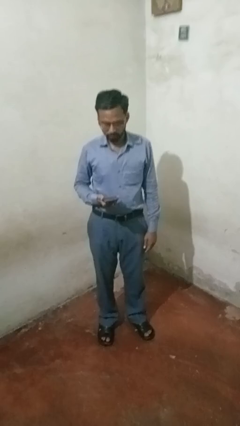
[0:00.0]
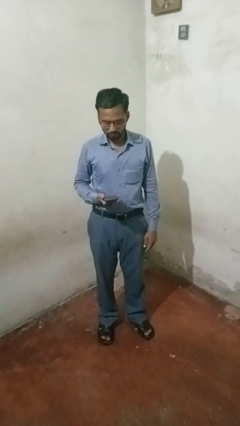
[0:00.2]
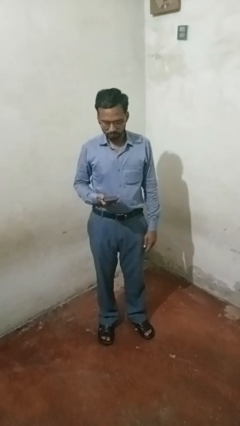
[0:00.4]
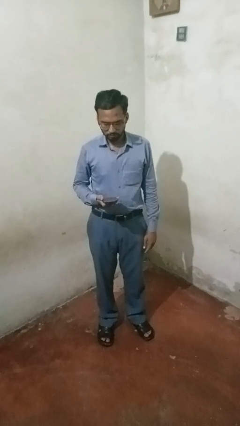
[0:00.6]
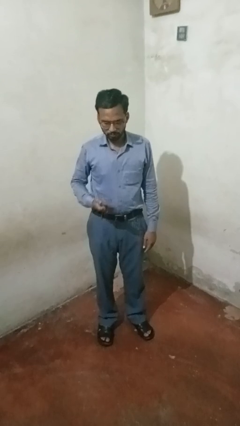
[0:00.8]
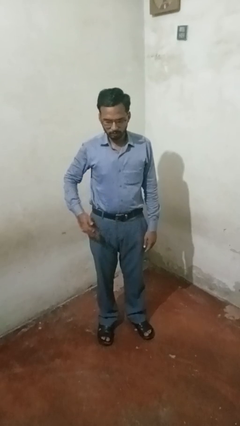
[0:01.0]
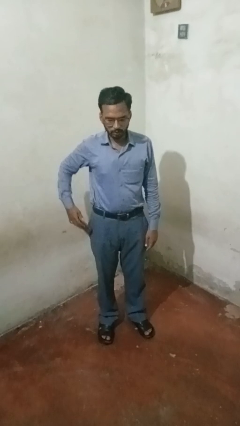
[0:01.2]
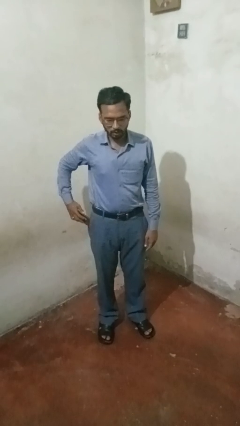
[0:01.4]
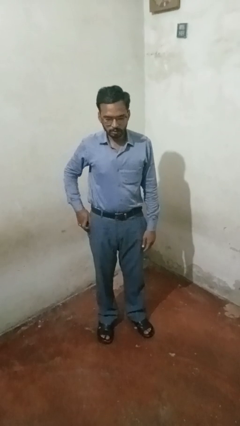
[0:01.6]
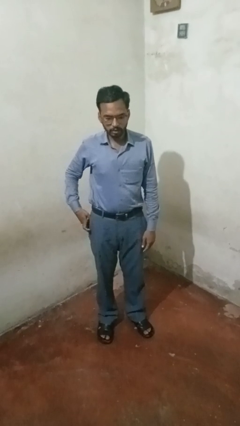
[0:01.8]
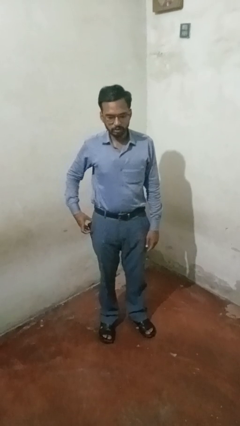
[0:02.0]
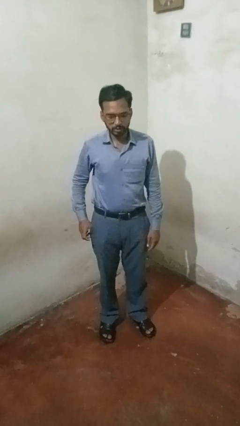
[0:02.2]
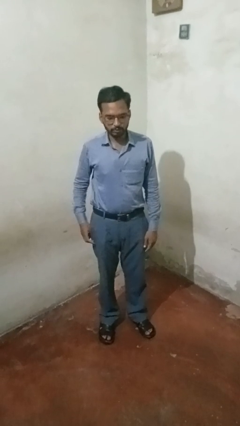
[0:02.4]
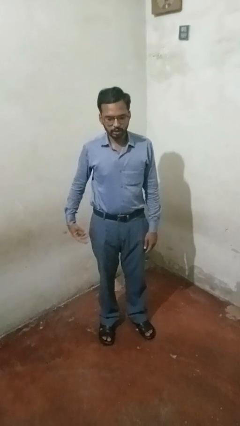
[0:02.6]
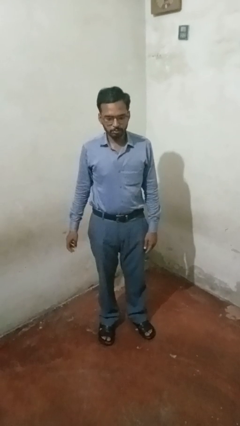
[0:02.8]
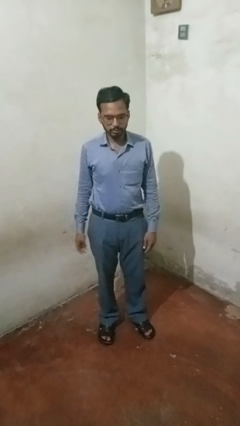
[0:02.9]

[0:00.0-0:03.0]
person puts phone into pocket

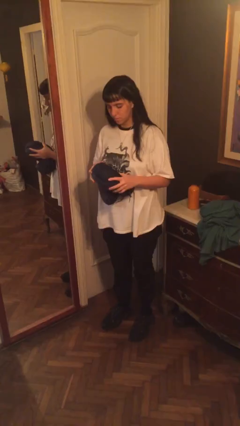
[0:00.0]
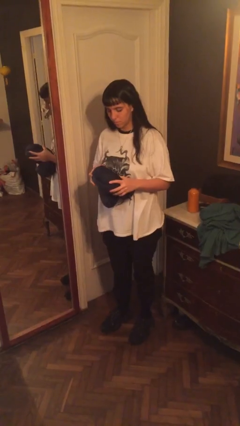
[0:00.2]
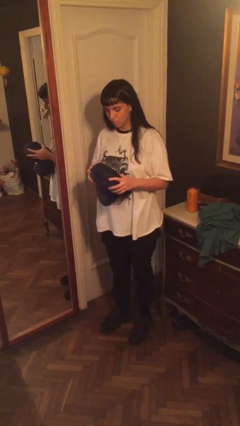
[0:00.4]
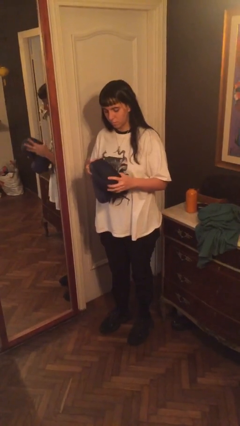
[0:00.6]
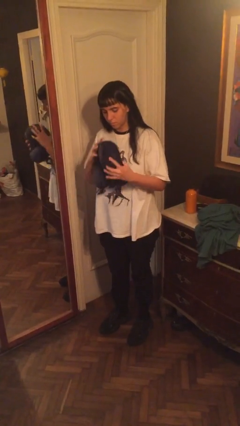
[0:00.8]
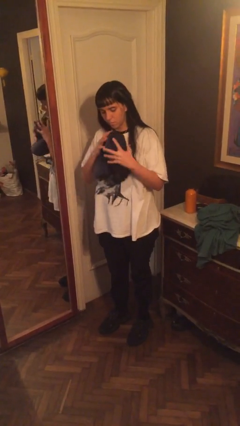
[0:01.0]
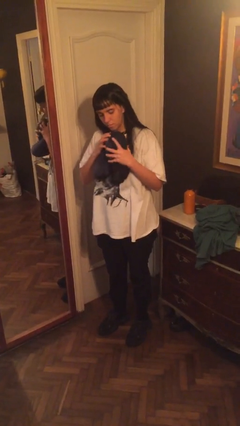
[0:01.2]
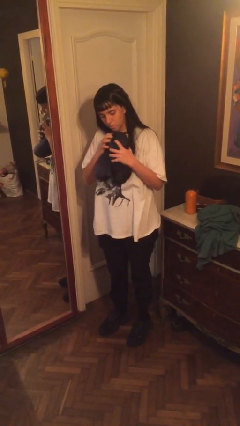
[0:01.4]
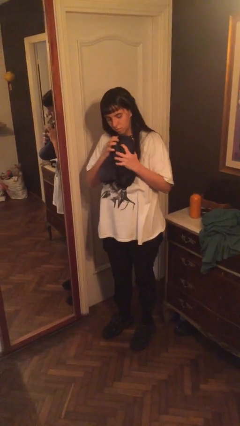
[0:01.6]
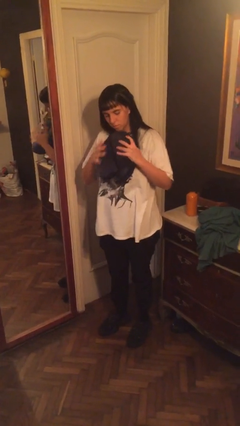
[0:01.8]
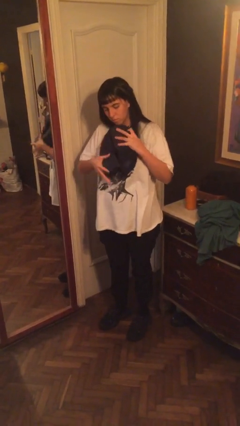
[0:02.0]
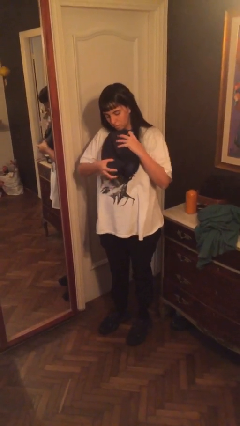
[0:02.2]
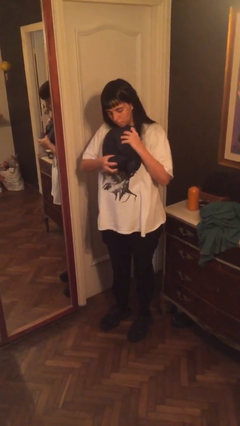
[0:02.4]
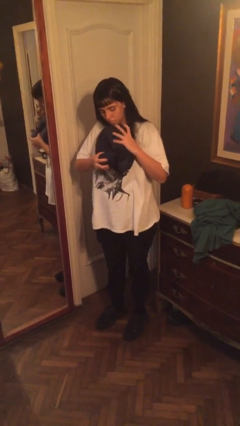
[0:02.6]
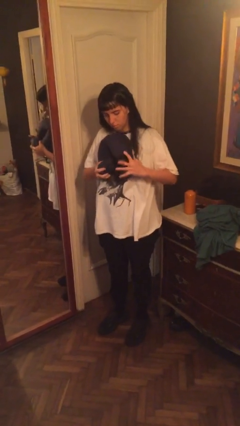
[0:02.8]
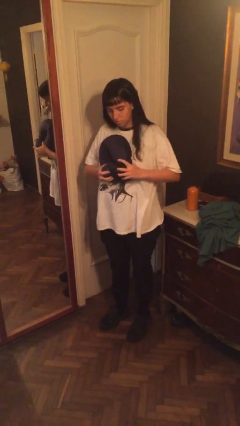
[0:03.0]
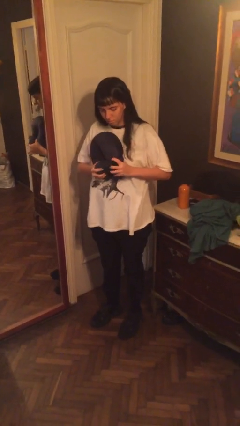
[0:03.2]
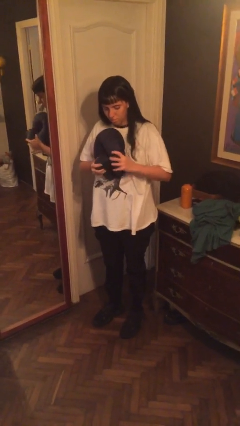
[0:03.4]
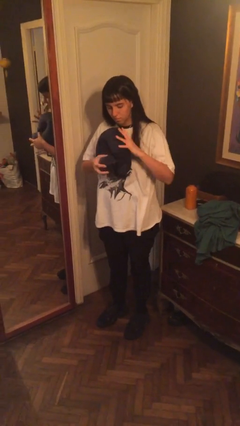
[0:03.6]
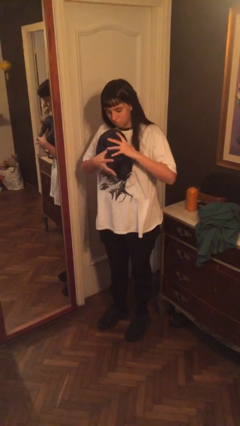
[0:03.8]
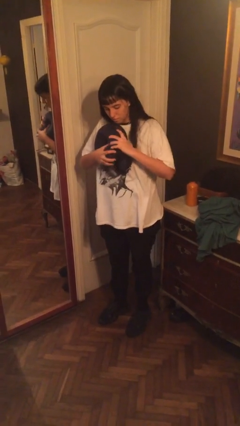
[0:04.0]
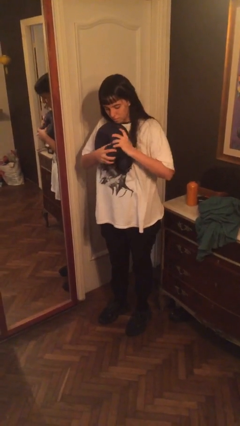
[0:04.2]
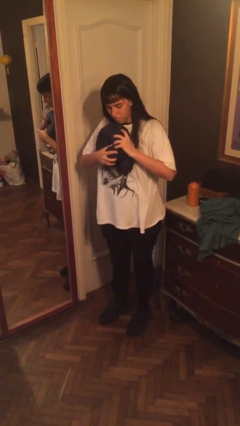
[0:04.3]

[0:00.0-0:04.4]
person squeezes object

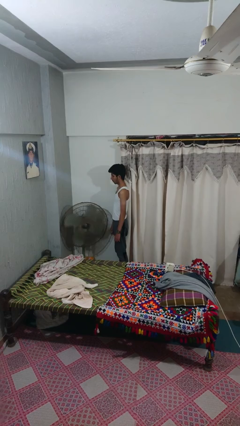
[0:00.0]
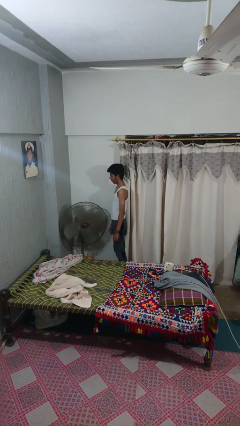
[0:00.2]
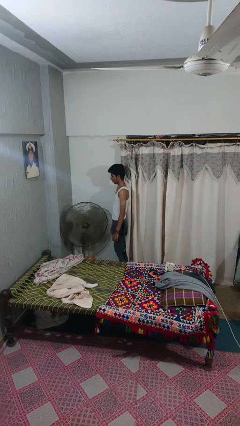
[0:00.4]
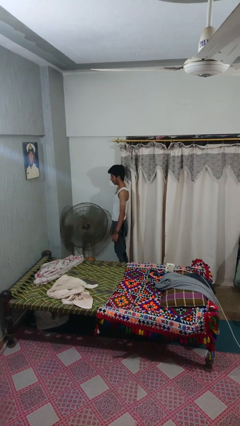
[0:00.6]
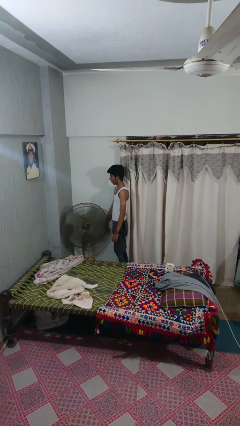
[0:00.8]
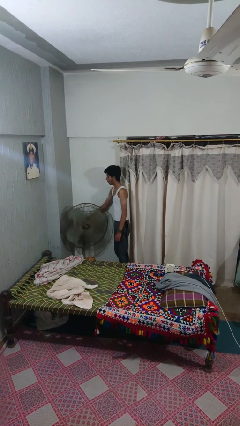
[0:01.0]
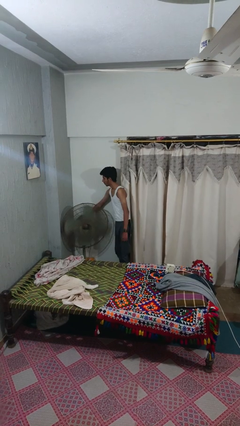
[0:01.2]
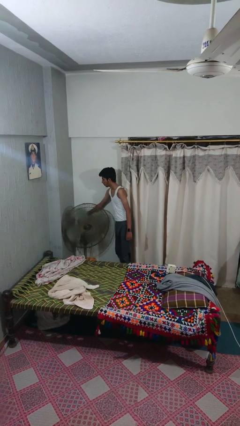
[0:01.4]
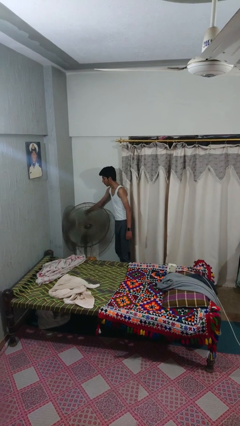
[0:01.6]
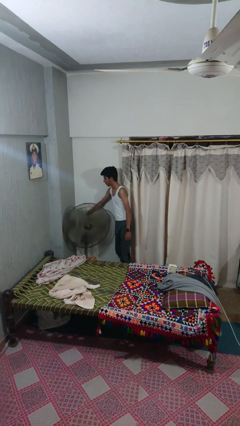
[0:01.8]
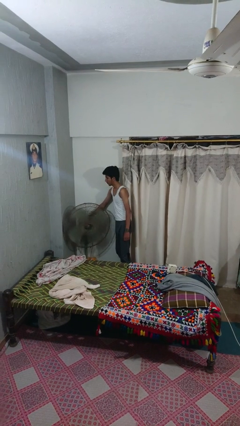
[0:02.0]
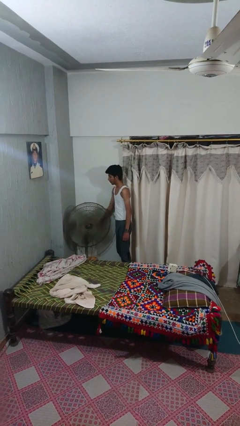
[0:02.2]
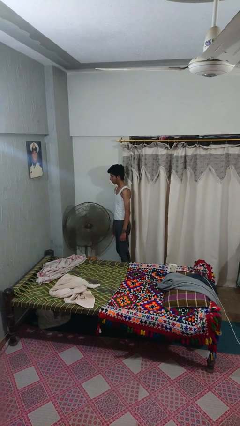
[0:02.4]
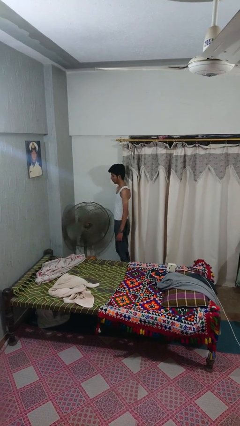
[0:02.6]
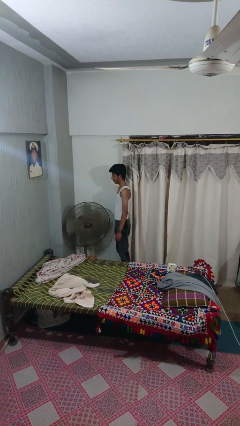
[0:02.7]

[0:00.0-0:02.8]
person turns off fan

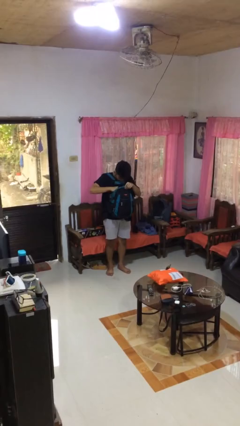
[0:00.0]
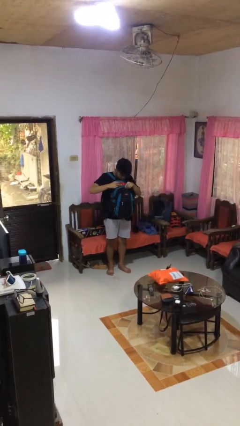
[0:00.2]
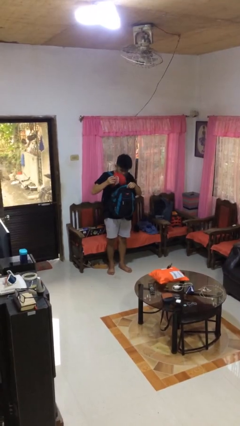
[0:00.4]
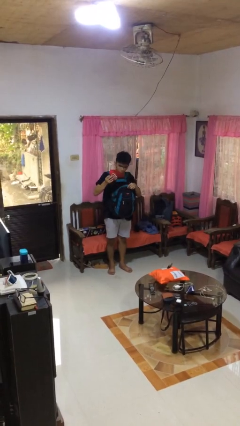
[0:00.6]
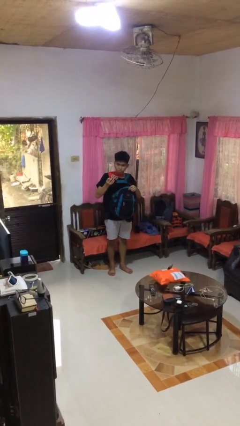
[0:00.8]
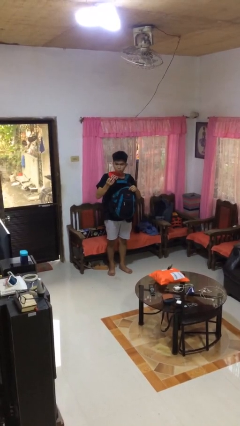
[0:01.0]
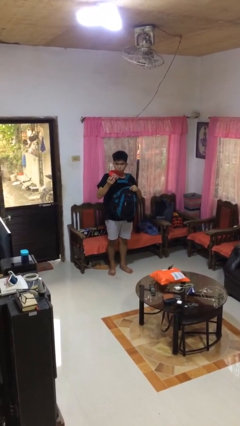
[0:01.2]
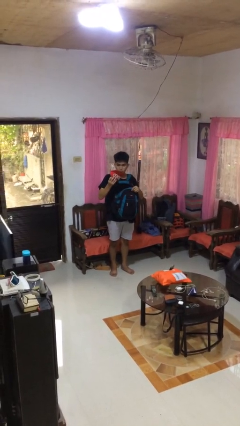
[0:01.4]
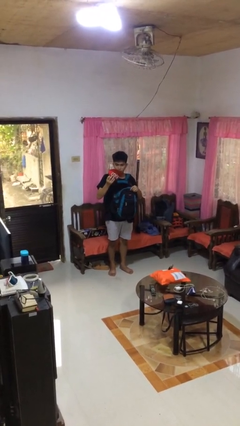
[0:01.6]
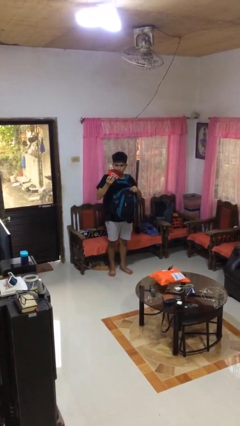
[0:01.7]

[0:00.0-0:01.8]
person takes object from backpack

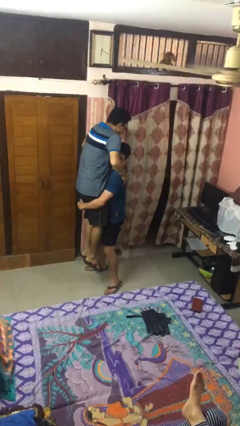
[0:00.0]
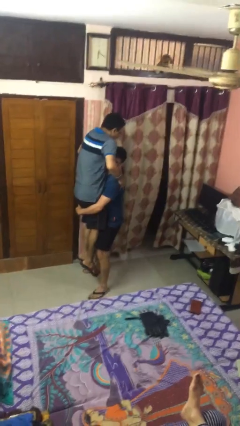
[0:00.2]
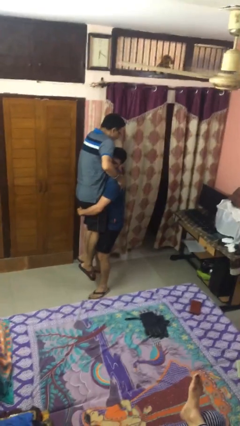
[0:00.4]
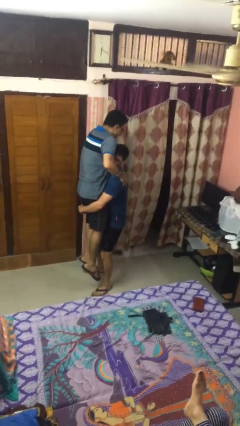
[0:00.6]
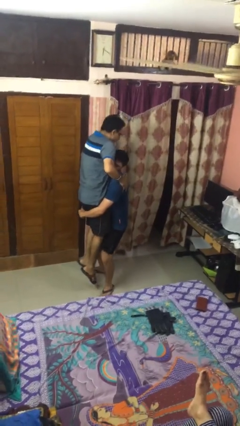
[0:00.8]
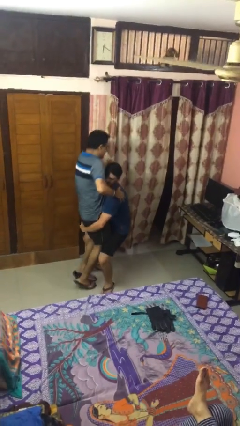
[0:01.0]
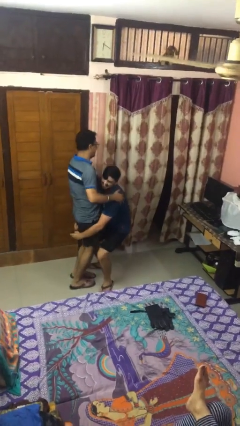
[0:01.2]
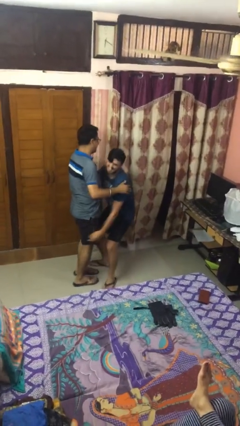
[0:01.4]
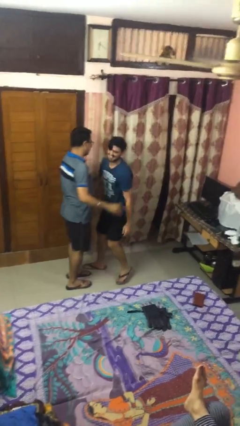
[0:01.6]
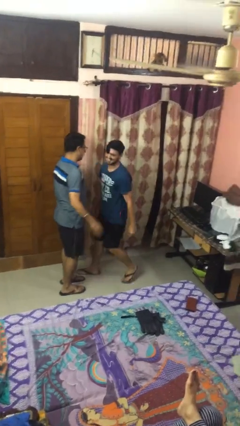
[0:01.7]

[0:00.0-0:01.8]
person puts down person

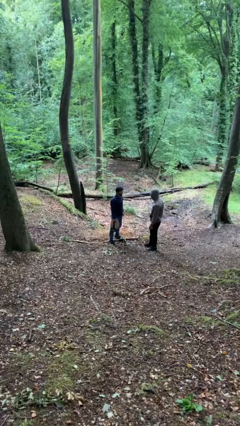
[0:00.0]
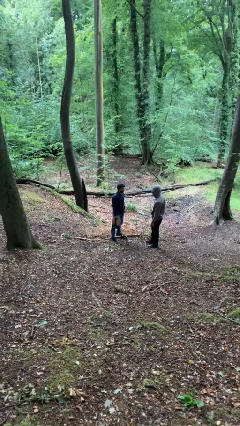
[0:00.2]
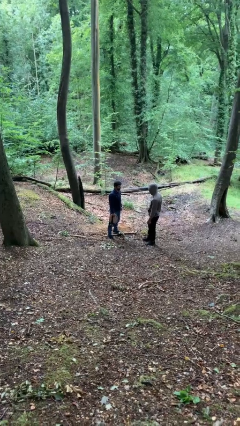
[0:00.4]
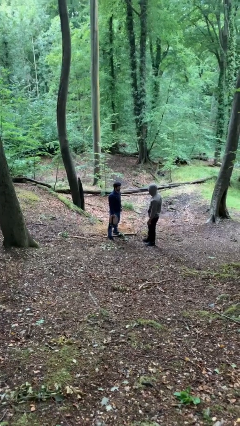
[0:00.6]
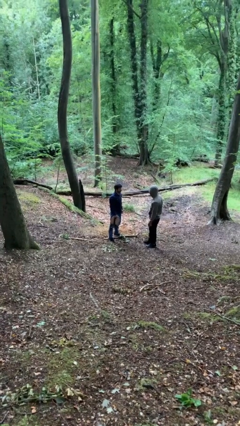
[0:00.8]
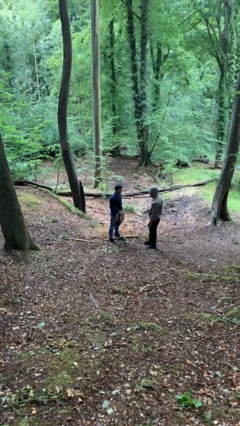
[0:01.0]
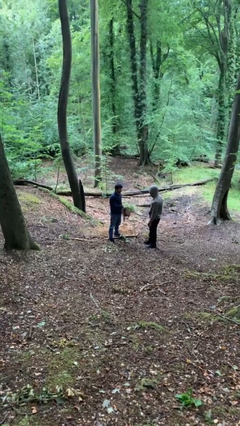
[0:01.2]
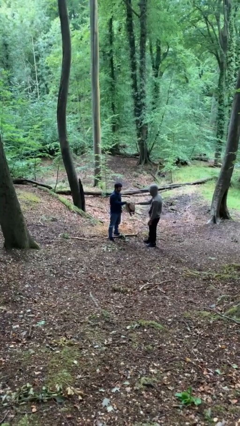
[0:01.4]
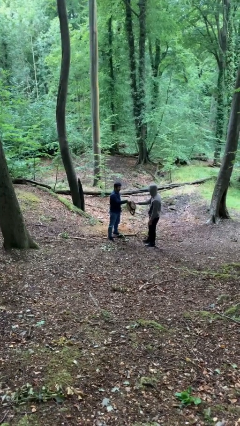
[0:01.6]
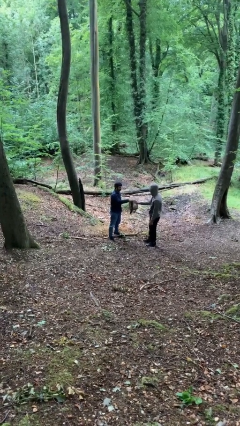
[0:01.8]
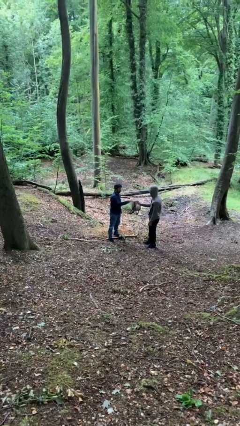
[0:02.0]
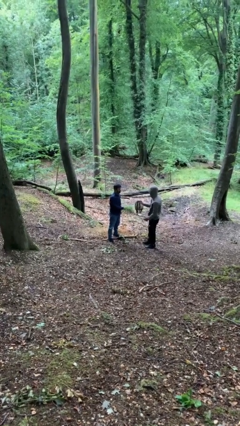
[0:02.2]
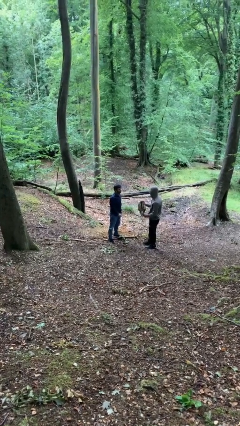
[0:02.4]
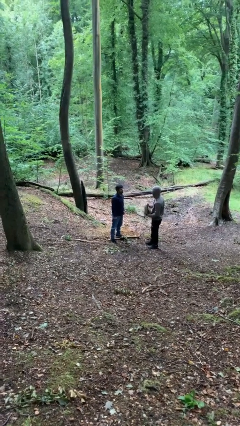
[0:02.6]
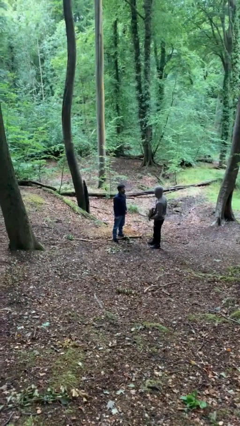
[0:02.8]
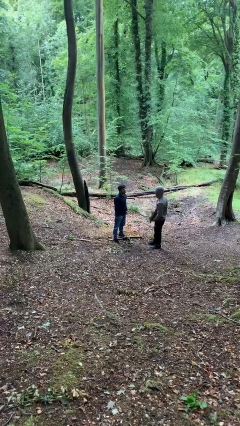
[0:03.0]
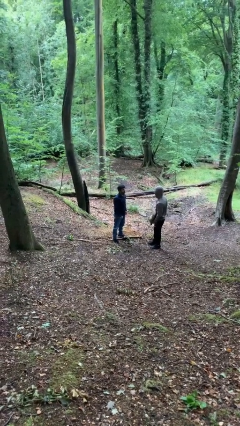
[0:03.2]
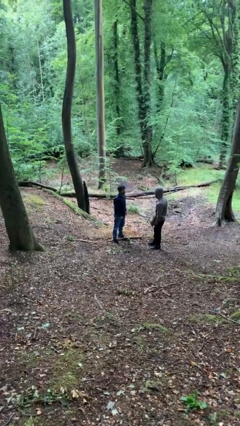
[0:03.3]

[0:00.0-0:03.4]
person transfers object to person

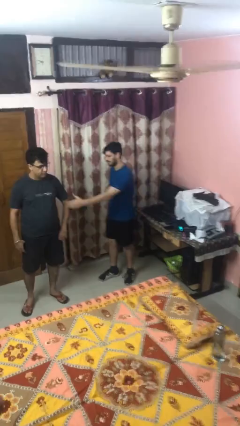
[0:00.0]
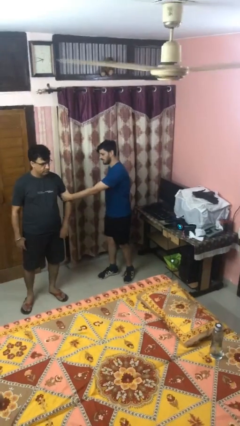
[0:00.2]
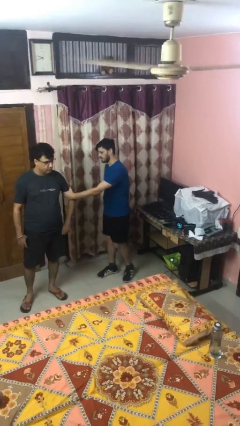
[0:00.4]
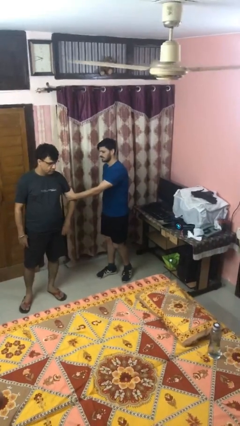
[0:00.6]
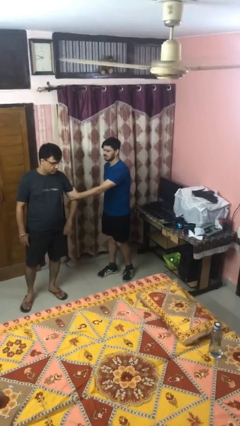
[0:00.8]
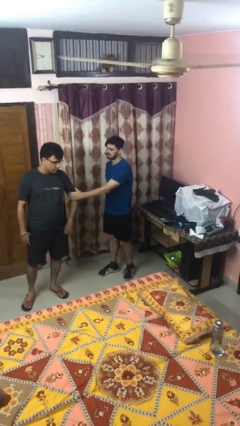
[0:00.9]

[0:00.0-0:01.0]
person grabs person by bicep
